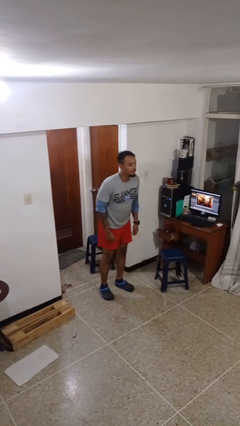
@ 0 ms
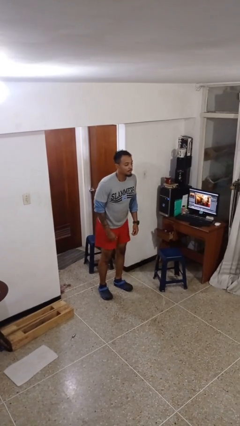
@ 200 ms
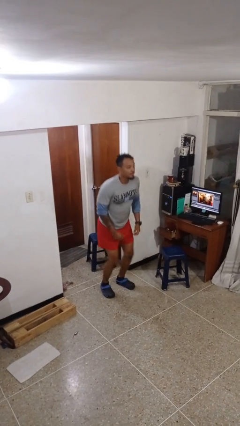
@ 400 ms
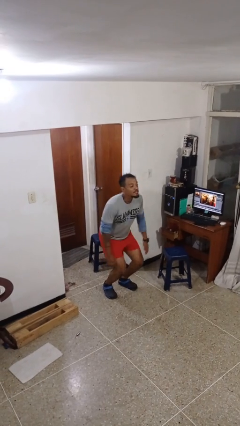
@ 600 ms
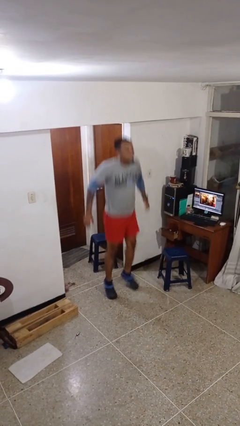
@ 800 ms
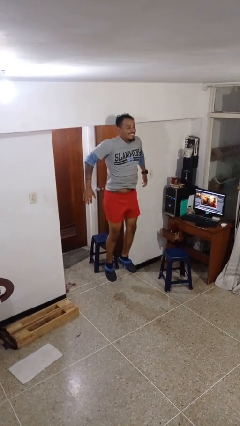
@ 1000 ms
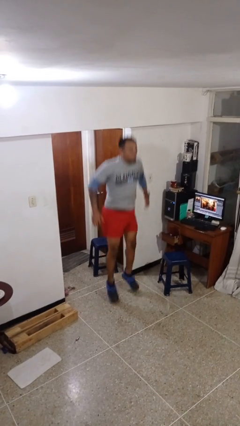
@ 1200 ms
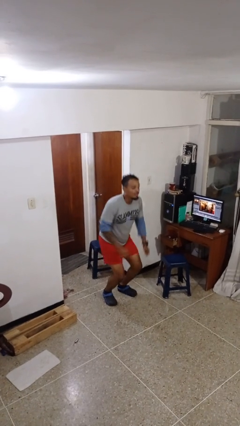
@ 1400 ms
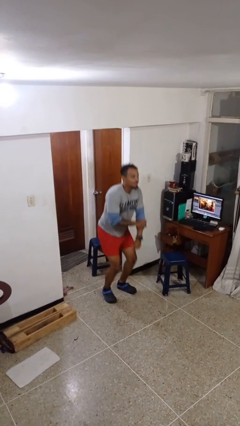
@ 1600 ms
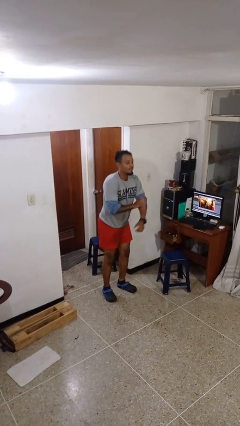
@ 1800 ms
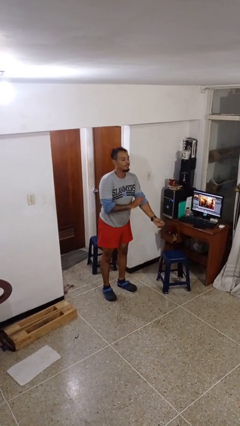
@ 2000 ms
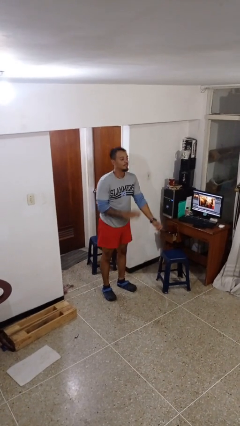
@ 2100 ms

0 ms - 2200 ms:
person jumps

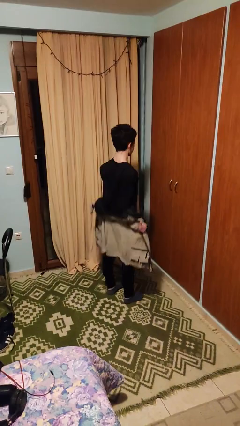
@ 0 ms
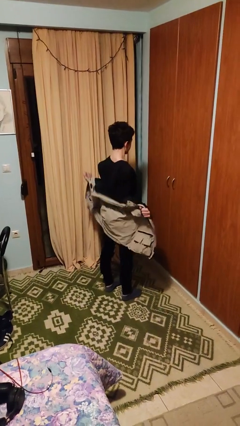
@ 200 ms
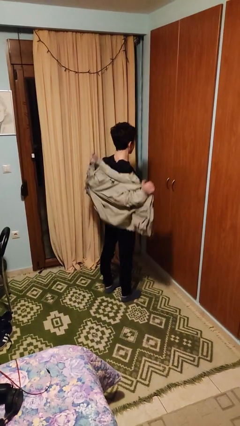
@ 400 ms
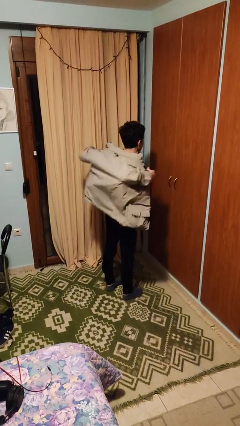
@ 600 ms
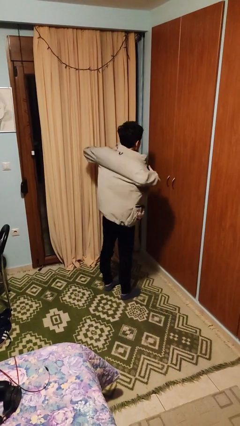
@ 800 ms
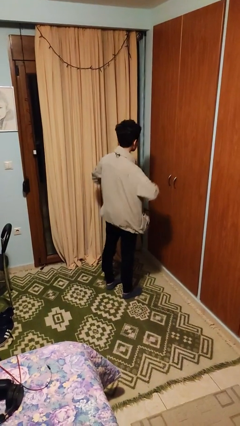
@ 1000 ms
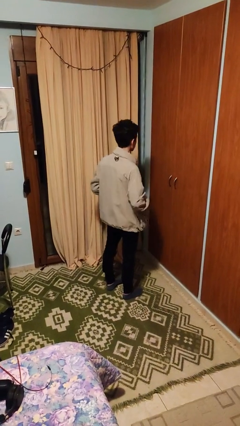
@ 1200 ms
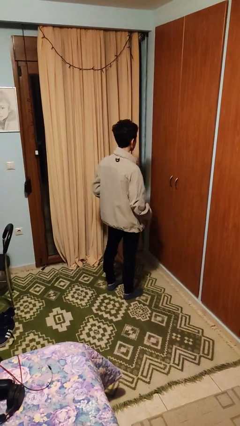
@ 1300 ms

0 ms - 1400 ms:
person puts on jacket

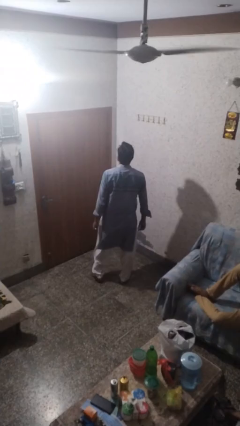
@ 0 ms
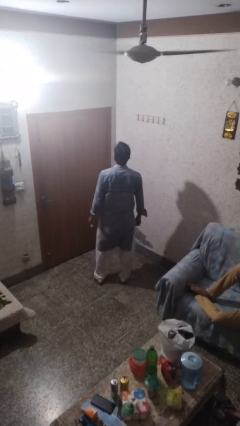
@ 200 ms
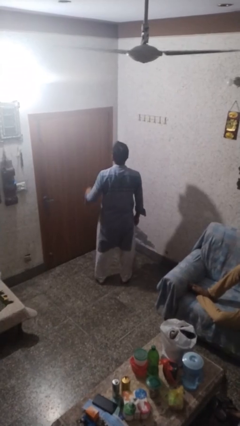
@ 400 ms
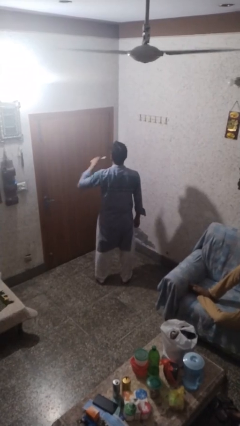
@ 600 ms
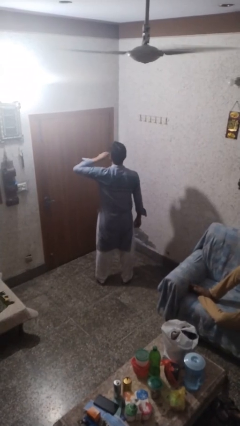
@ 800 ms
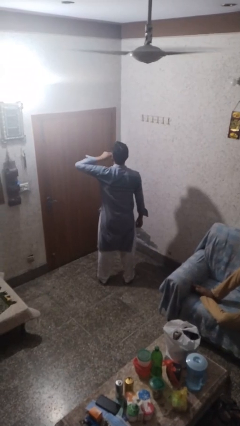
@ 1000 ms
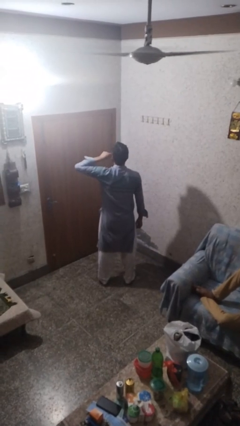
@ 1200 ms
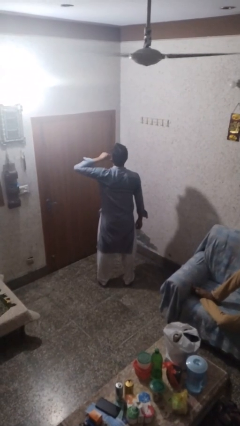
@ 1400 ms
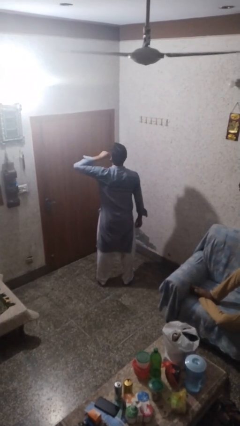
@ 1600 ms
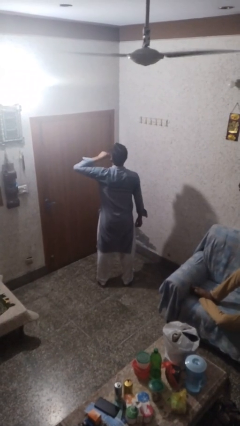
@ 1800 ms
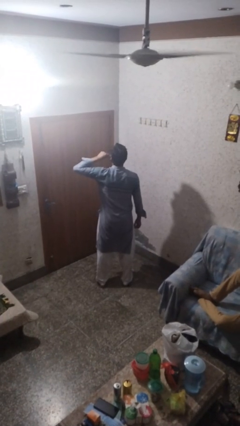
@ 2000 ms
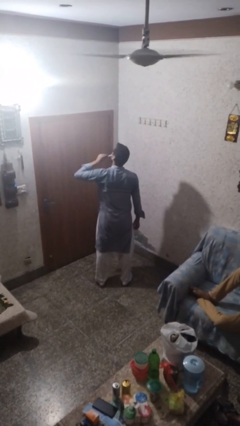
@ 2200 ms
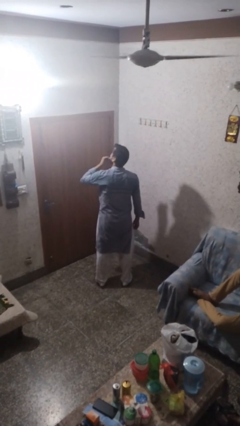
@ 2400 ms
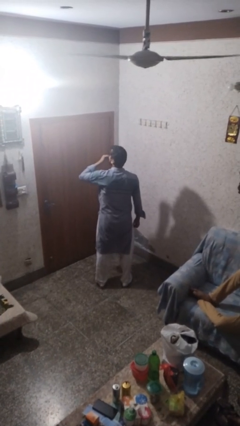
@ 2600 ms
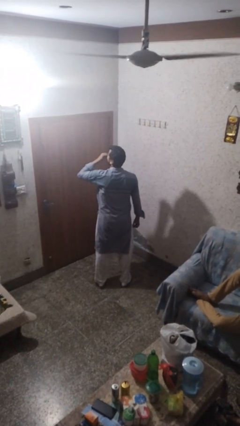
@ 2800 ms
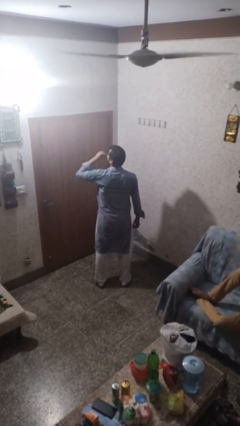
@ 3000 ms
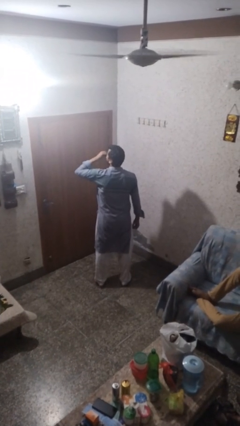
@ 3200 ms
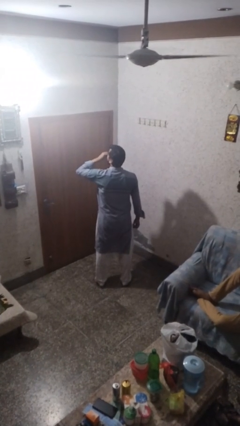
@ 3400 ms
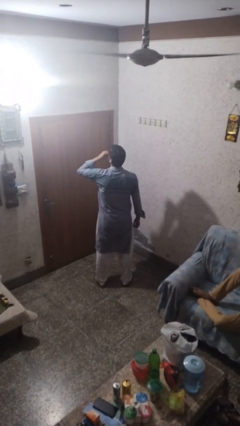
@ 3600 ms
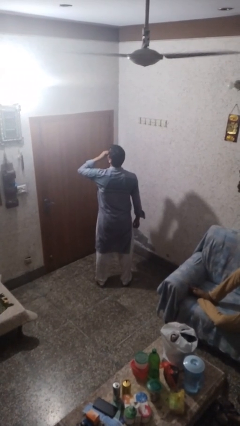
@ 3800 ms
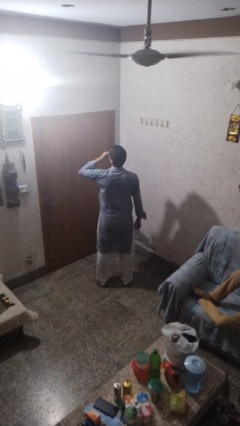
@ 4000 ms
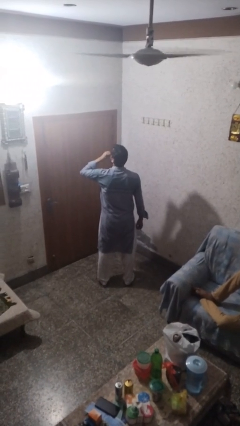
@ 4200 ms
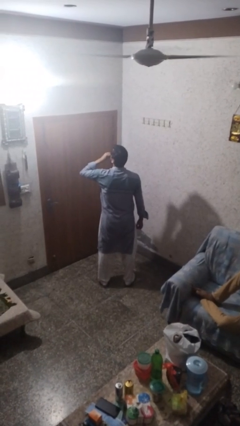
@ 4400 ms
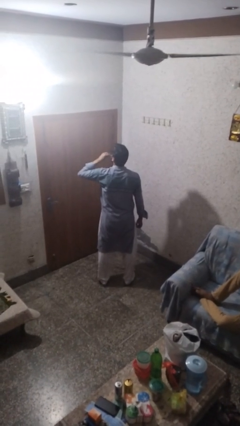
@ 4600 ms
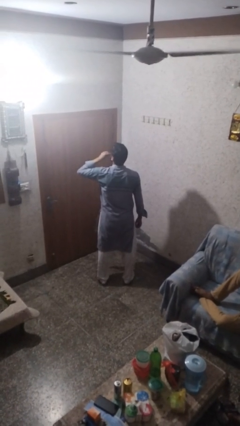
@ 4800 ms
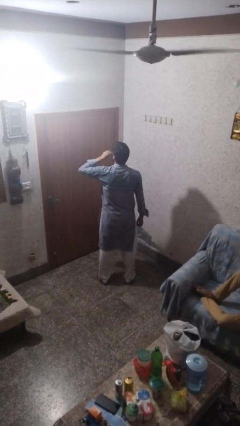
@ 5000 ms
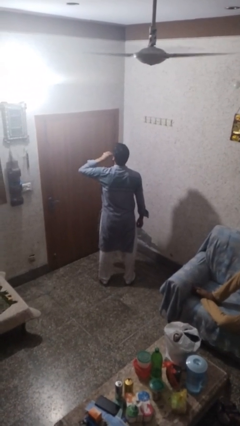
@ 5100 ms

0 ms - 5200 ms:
person brushes teeth

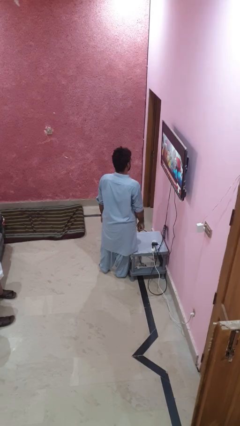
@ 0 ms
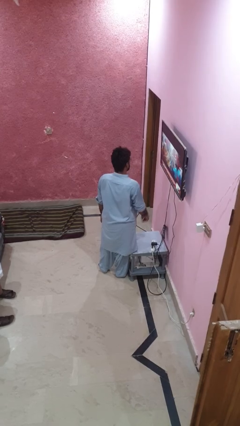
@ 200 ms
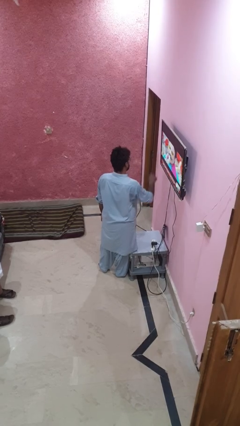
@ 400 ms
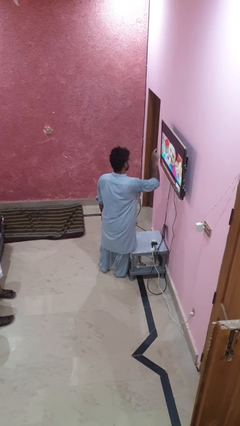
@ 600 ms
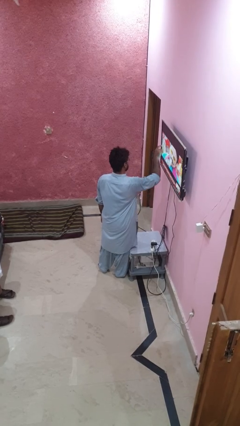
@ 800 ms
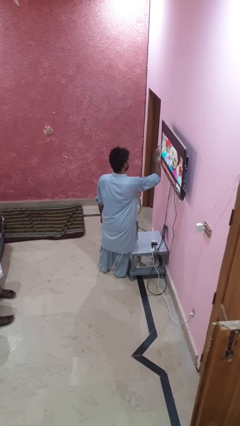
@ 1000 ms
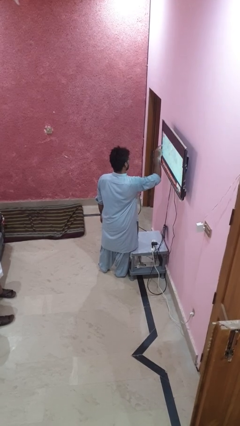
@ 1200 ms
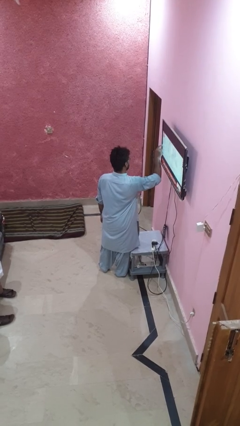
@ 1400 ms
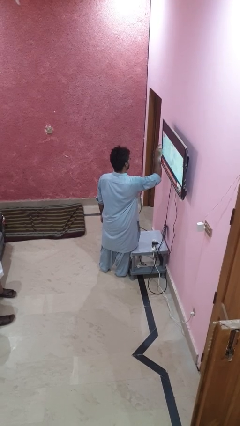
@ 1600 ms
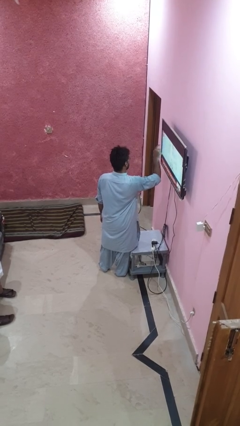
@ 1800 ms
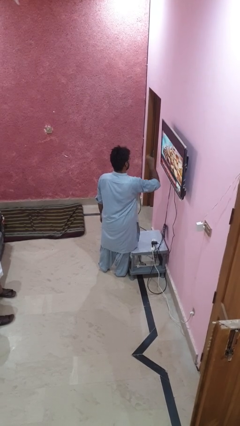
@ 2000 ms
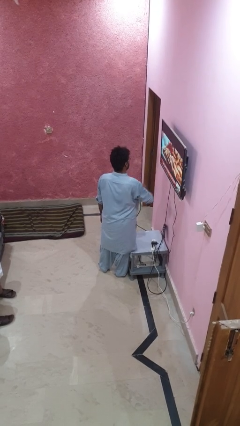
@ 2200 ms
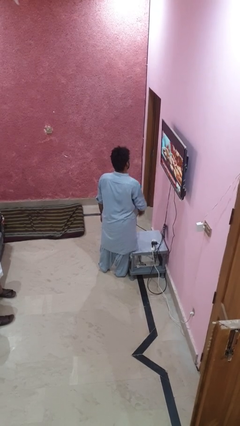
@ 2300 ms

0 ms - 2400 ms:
person taps object with finger

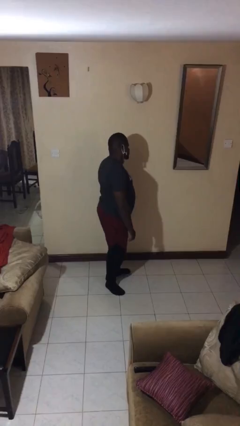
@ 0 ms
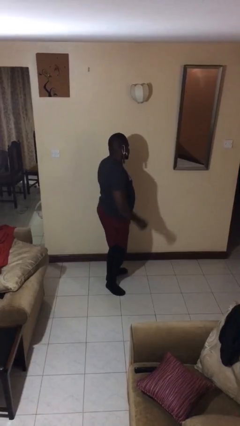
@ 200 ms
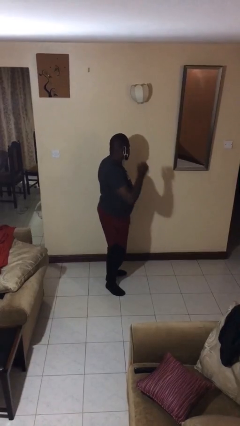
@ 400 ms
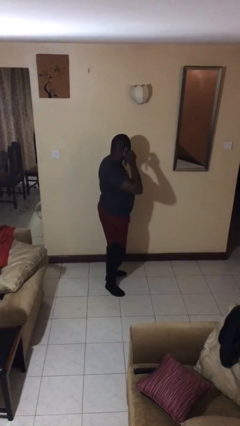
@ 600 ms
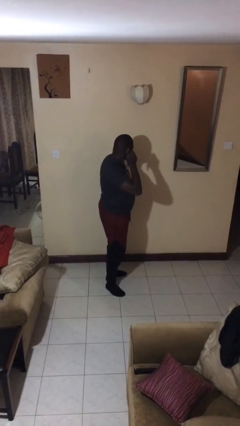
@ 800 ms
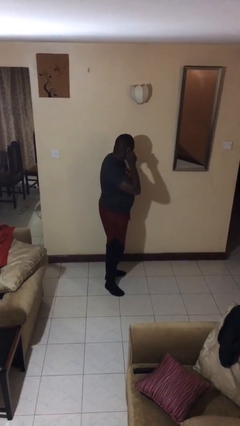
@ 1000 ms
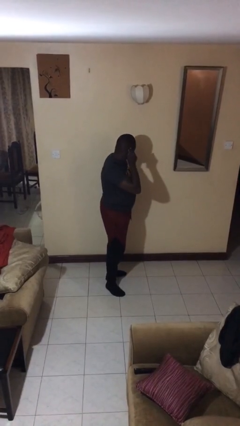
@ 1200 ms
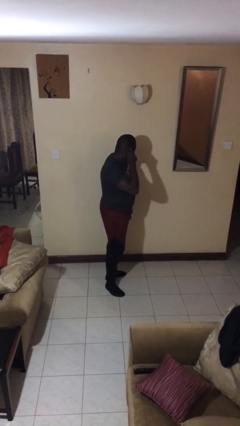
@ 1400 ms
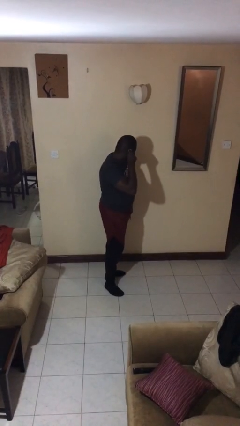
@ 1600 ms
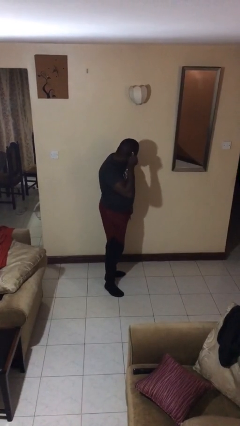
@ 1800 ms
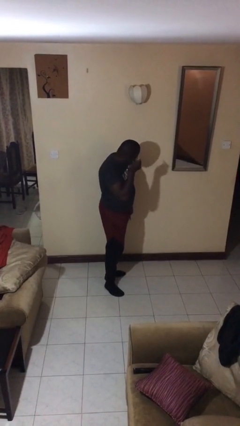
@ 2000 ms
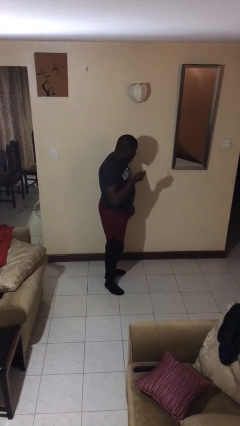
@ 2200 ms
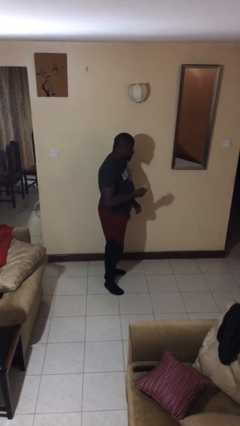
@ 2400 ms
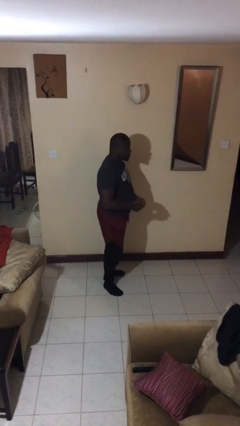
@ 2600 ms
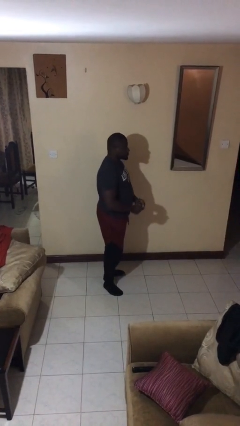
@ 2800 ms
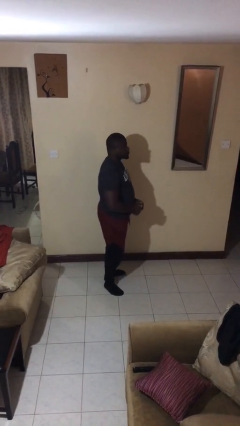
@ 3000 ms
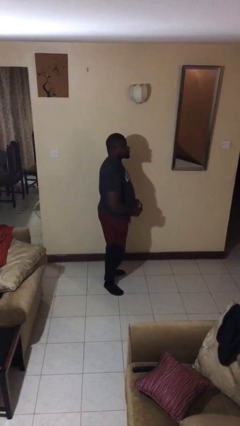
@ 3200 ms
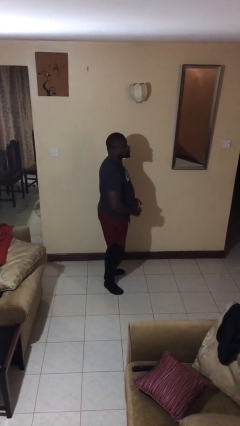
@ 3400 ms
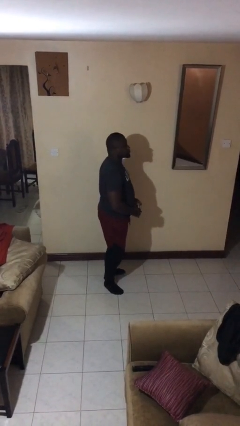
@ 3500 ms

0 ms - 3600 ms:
person takes off earrings

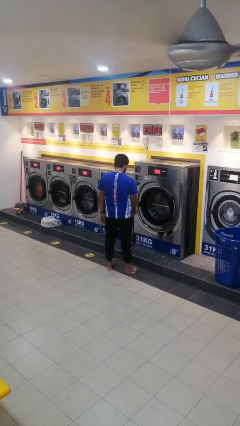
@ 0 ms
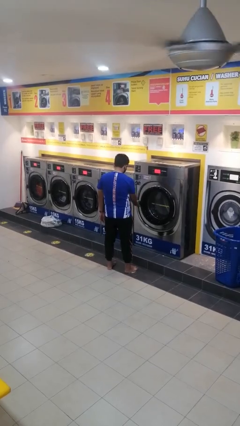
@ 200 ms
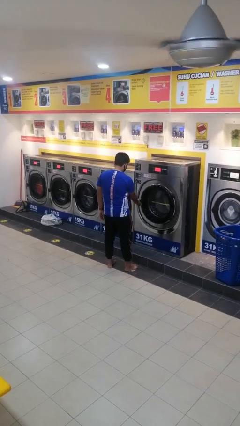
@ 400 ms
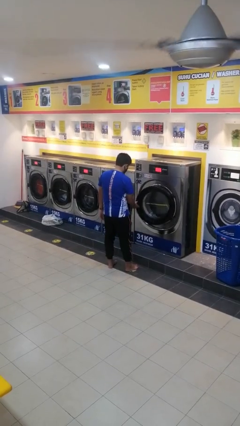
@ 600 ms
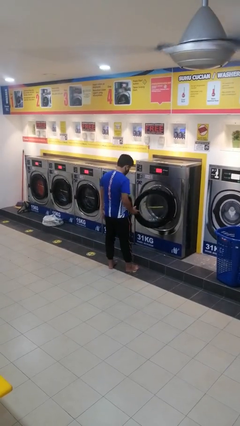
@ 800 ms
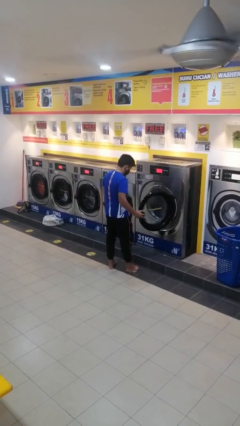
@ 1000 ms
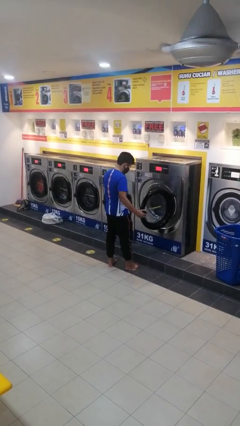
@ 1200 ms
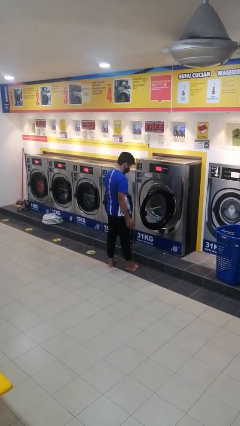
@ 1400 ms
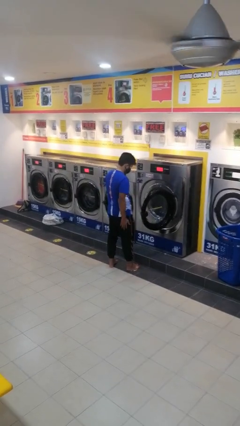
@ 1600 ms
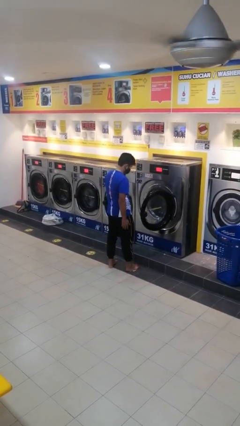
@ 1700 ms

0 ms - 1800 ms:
person opens clothes washer

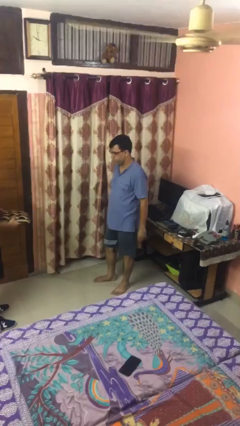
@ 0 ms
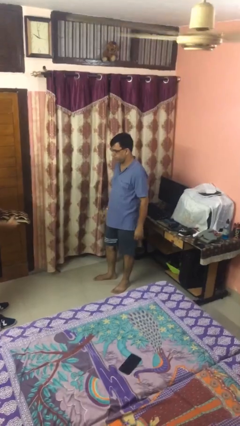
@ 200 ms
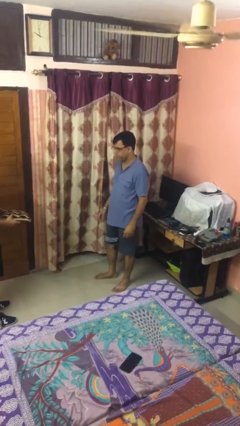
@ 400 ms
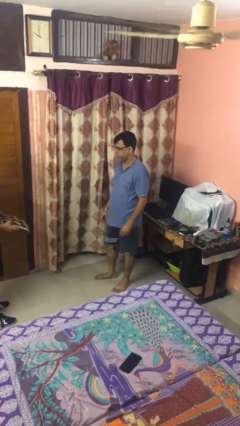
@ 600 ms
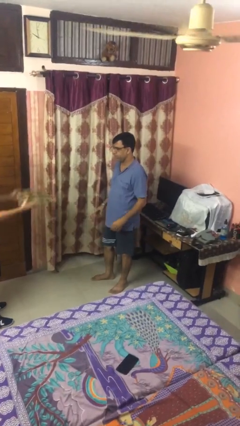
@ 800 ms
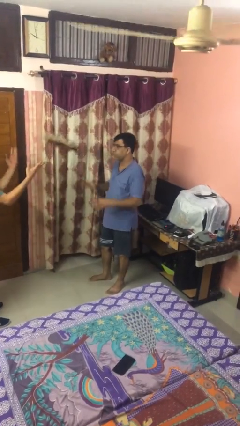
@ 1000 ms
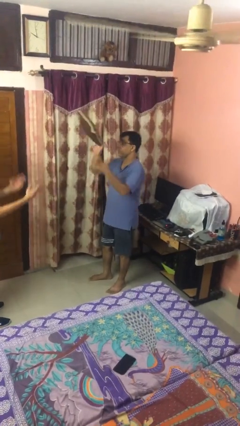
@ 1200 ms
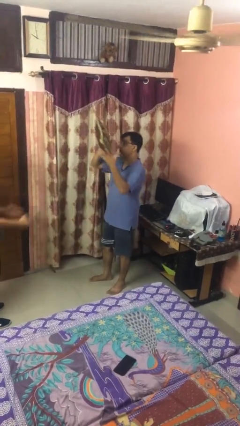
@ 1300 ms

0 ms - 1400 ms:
person catches object from person
